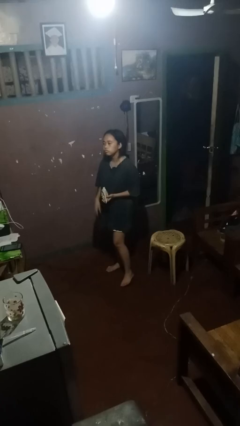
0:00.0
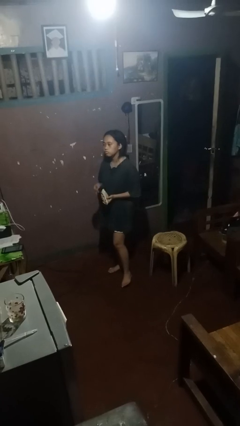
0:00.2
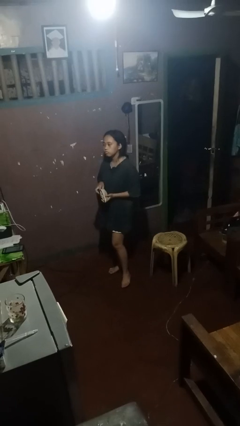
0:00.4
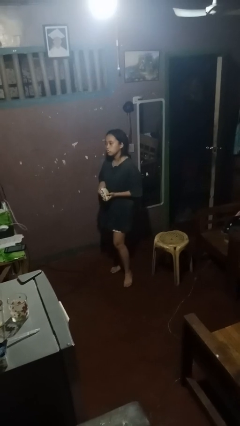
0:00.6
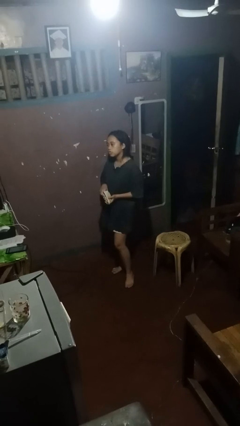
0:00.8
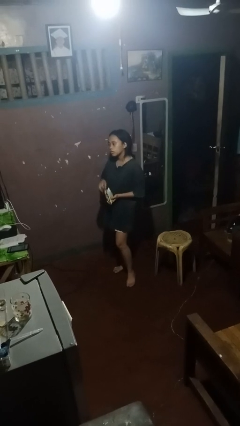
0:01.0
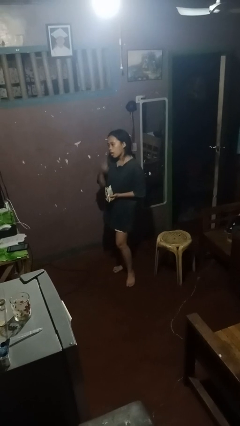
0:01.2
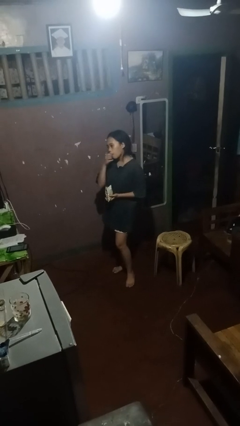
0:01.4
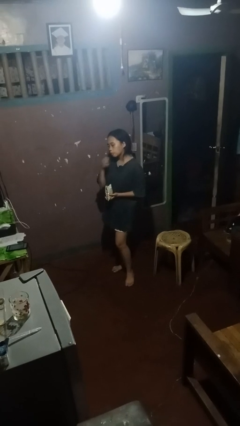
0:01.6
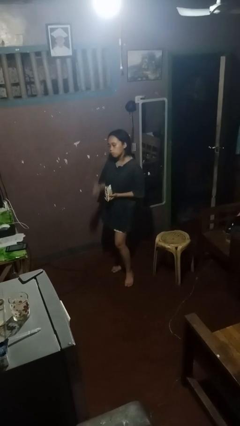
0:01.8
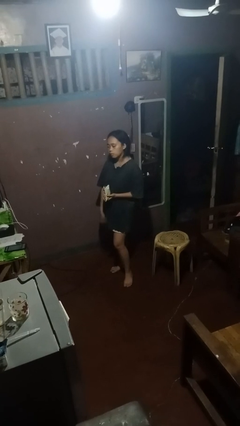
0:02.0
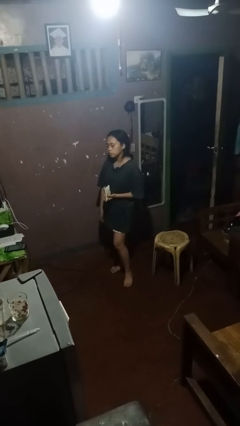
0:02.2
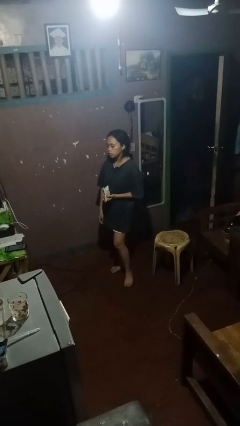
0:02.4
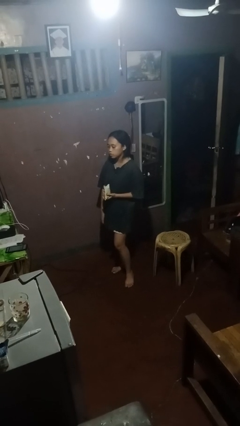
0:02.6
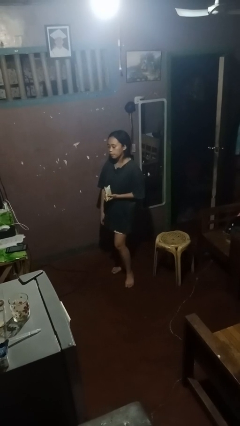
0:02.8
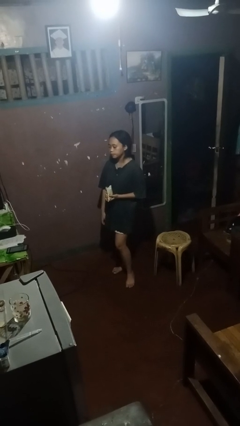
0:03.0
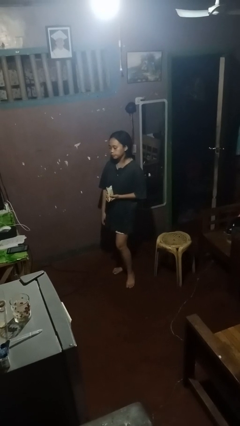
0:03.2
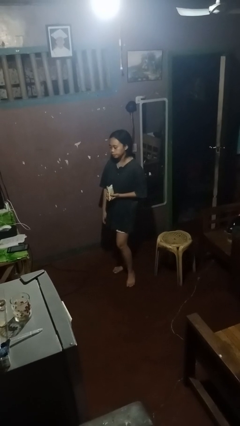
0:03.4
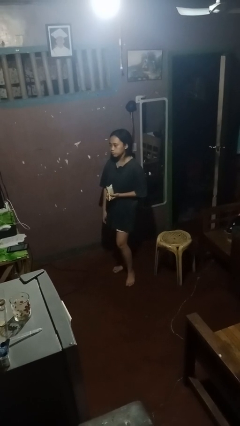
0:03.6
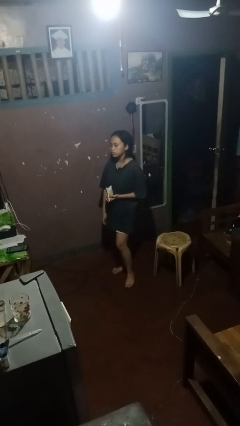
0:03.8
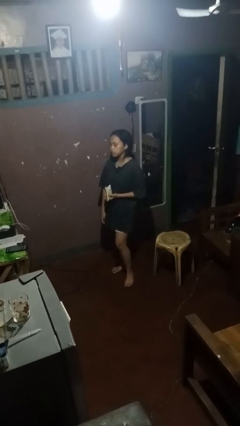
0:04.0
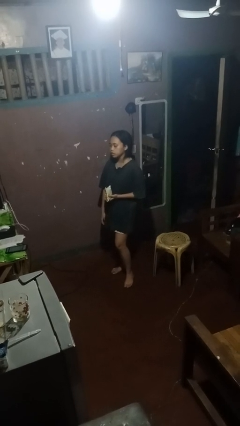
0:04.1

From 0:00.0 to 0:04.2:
person eats snack from bag

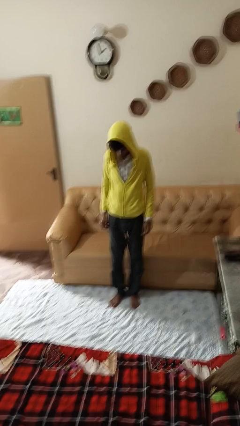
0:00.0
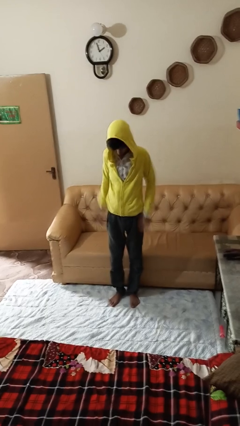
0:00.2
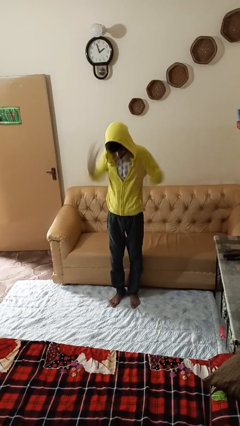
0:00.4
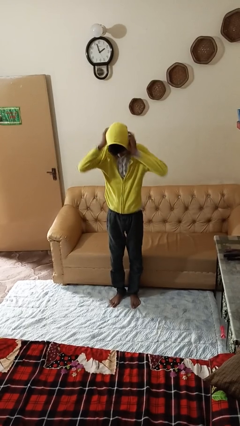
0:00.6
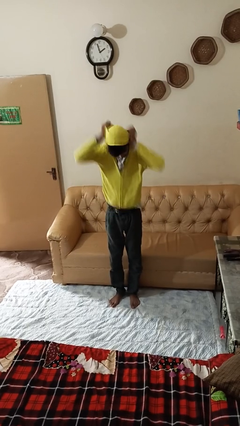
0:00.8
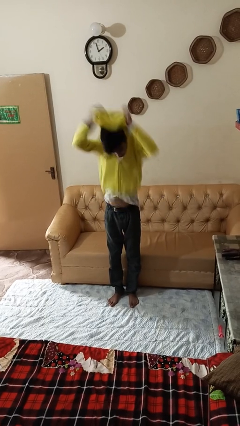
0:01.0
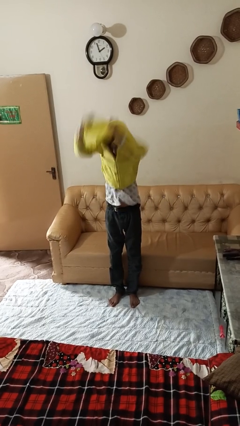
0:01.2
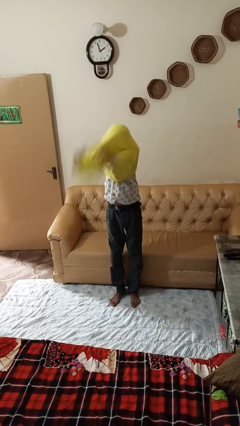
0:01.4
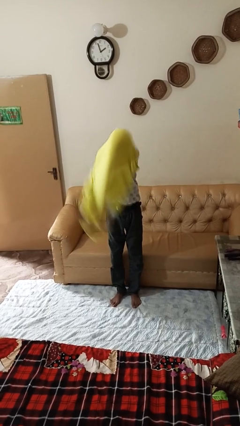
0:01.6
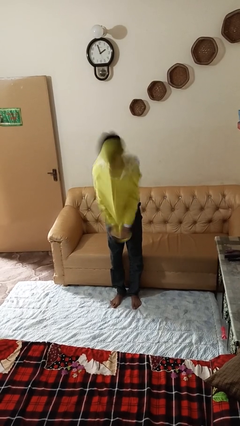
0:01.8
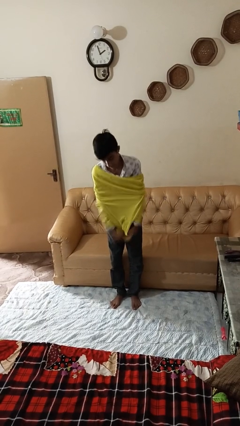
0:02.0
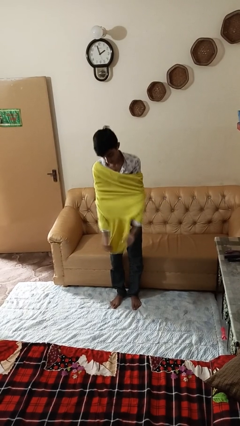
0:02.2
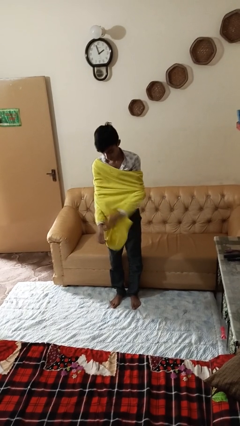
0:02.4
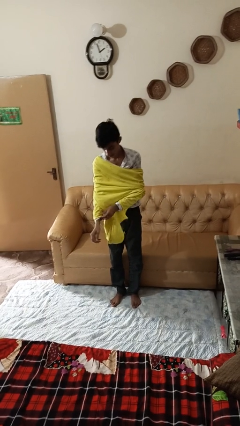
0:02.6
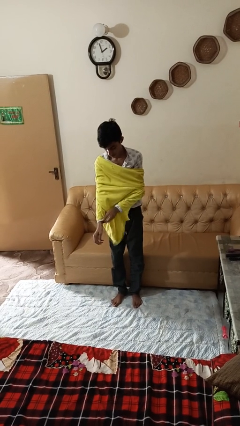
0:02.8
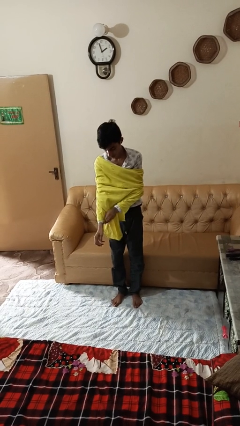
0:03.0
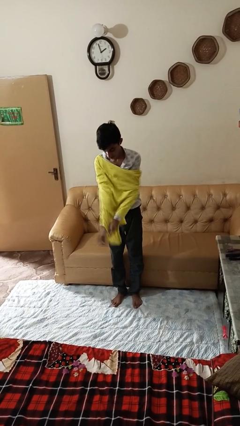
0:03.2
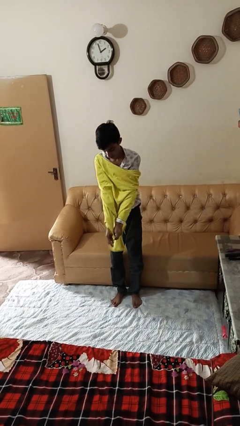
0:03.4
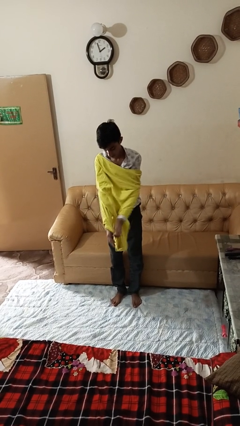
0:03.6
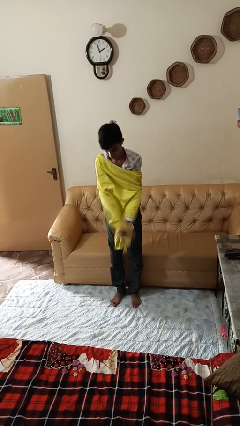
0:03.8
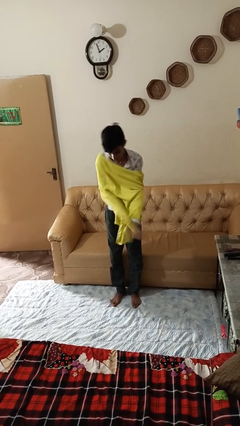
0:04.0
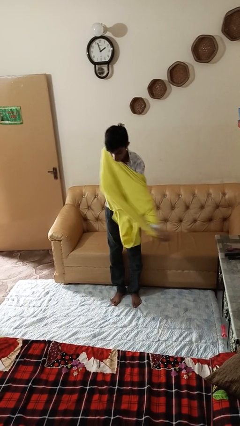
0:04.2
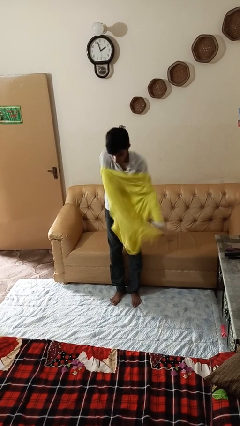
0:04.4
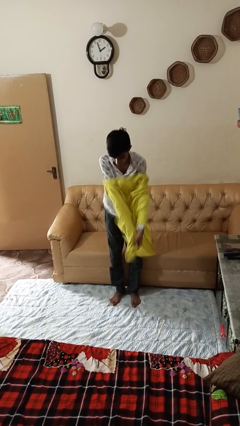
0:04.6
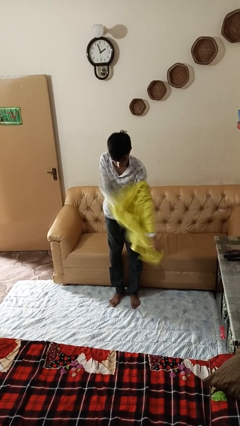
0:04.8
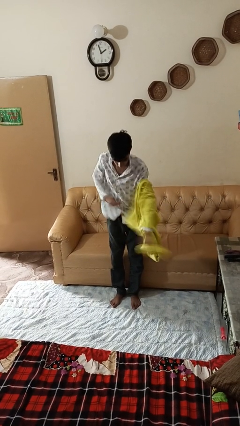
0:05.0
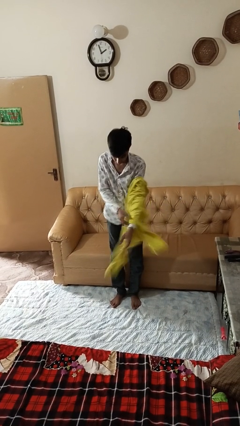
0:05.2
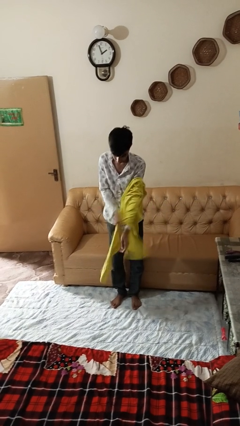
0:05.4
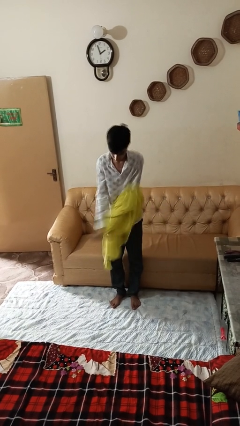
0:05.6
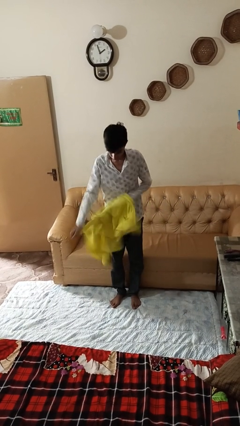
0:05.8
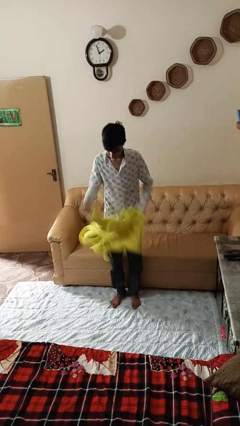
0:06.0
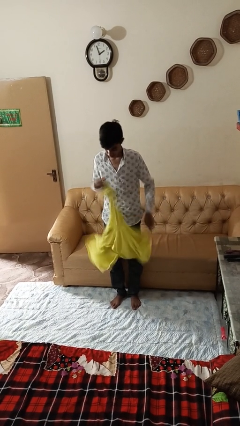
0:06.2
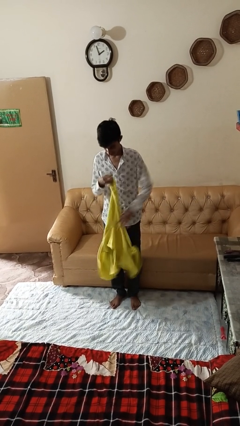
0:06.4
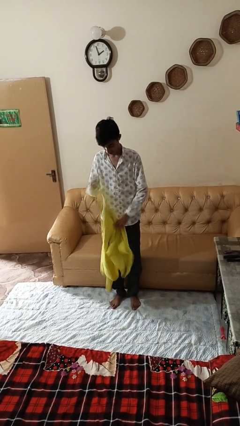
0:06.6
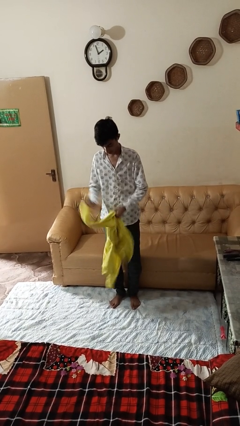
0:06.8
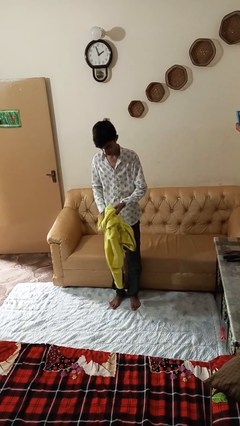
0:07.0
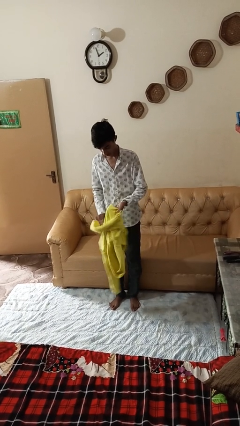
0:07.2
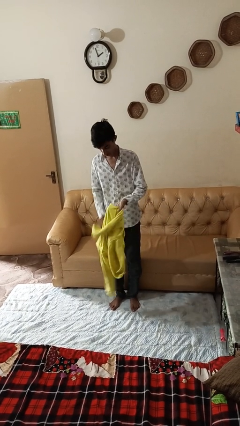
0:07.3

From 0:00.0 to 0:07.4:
person takes off hoodie

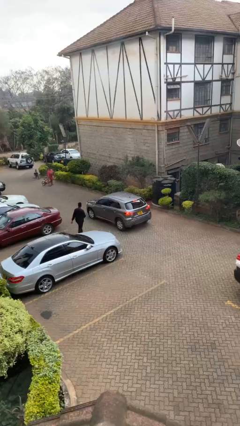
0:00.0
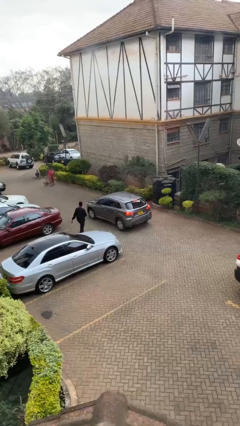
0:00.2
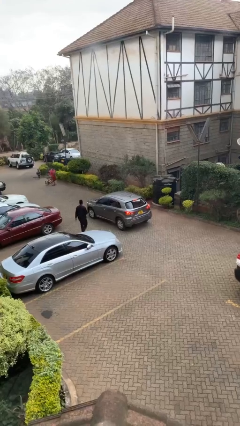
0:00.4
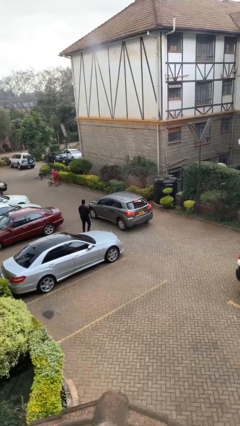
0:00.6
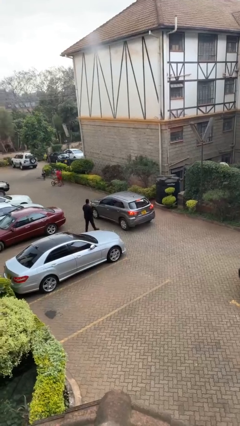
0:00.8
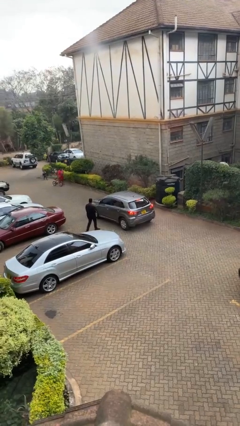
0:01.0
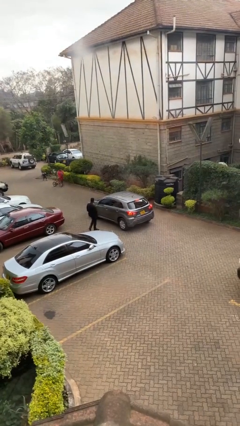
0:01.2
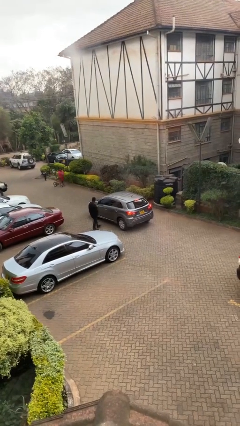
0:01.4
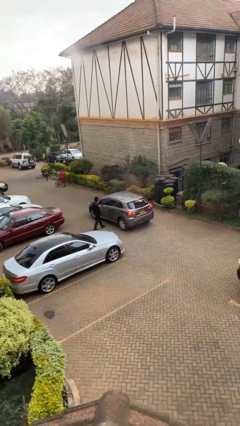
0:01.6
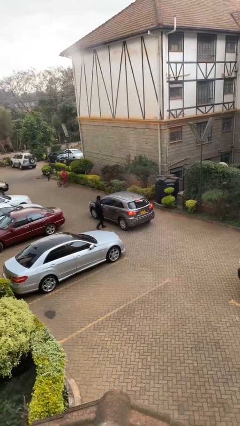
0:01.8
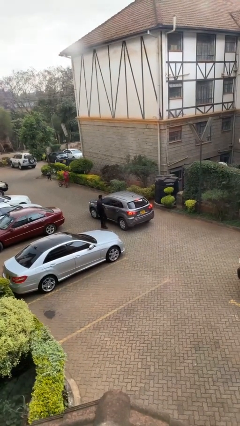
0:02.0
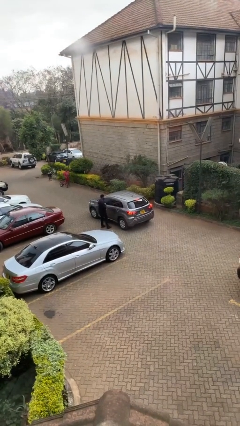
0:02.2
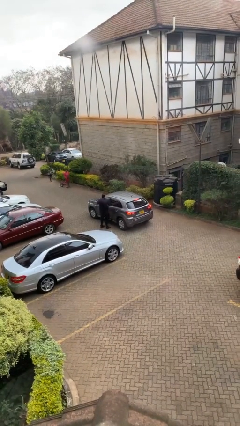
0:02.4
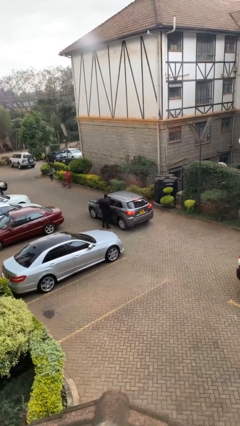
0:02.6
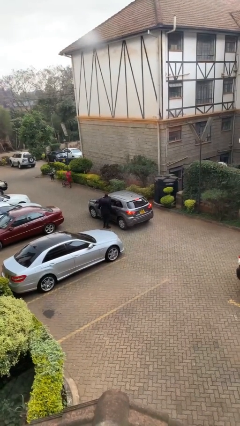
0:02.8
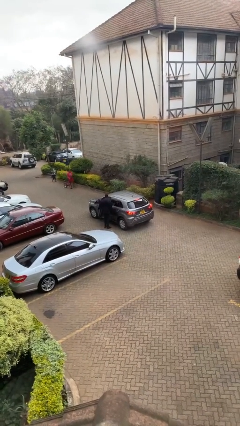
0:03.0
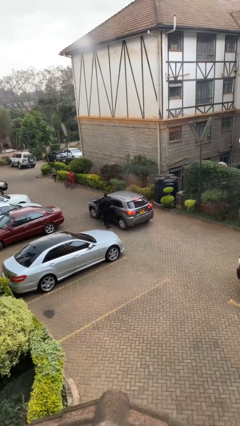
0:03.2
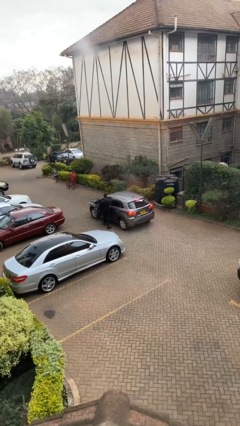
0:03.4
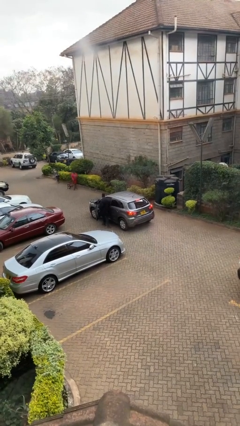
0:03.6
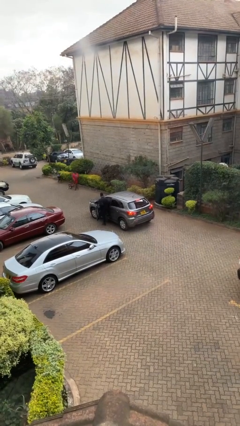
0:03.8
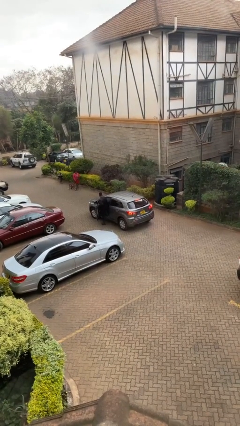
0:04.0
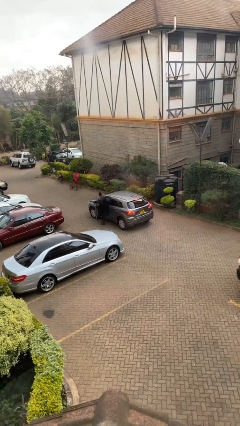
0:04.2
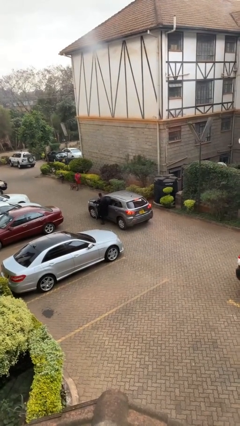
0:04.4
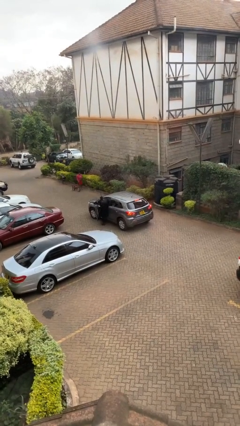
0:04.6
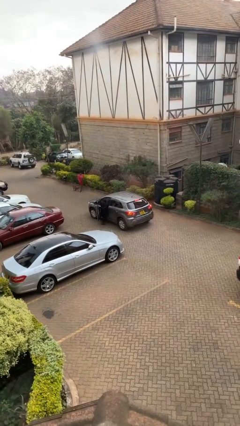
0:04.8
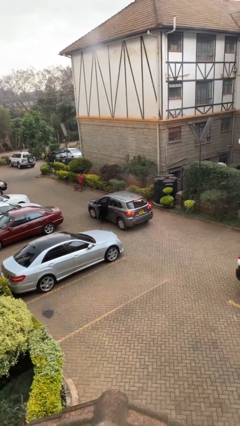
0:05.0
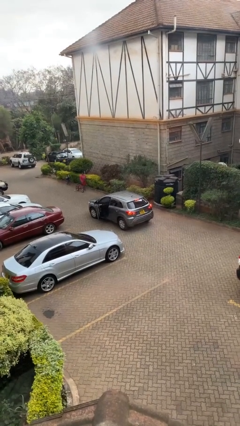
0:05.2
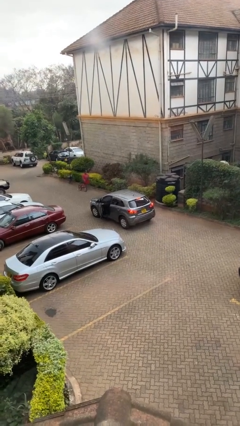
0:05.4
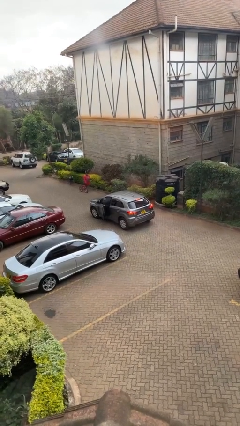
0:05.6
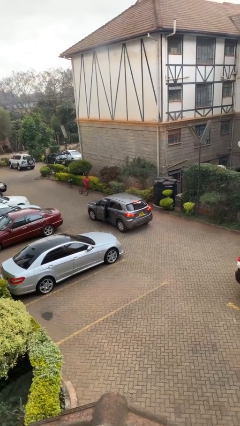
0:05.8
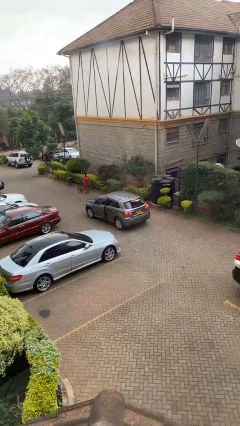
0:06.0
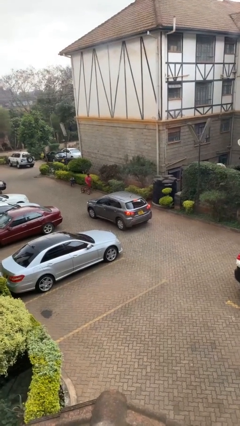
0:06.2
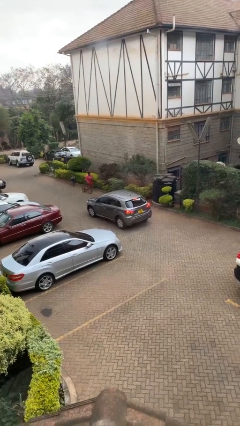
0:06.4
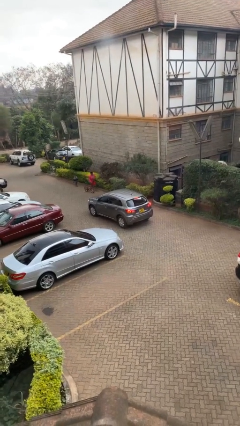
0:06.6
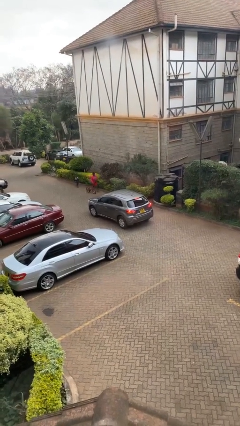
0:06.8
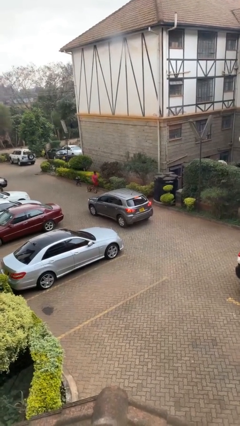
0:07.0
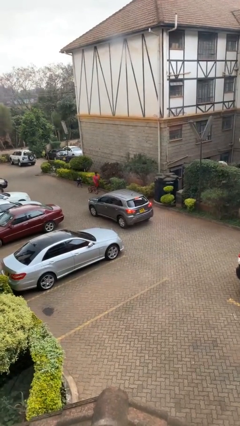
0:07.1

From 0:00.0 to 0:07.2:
car picks up person
